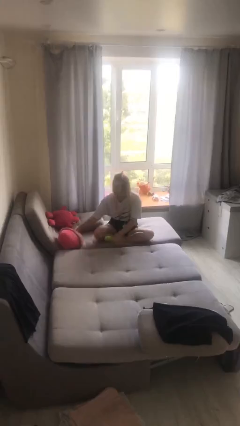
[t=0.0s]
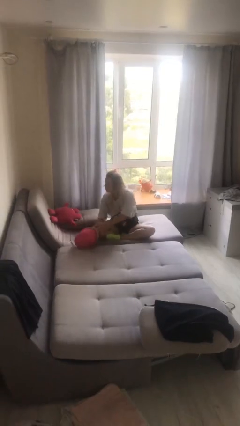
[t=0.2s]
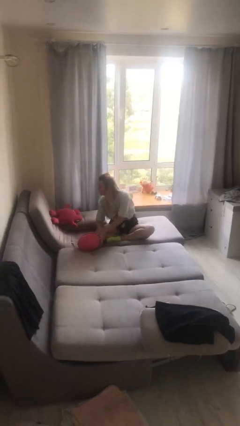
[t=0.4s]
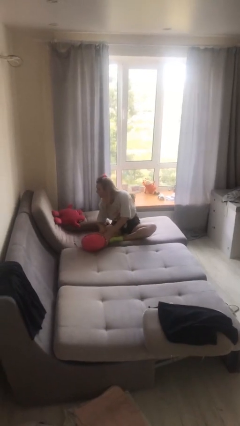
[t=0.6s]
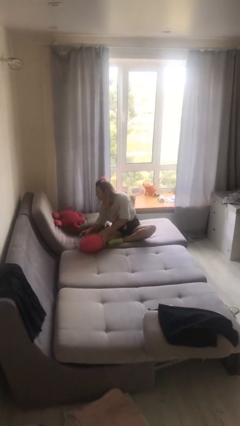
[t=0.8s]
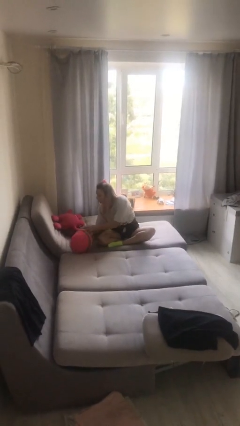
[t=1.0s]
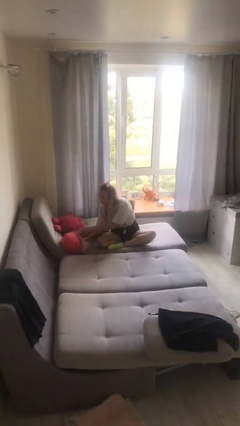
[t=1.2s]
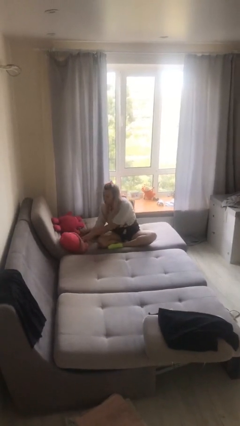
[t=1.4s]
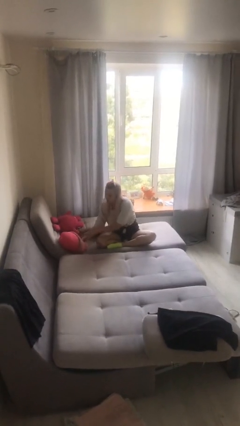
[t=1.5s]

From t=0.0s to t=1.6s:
person searches under bed

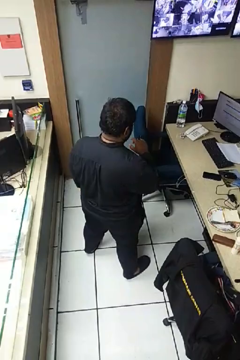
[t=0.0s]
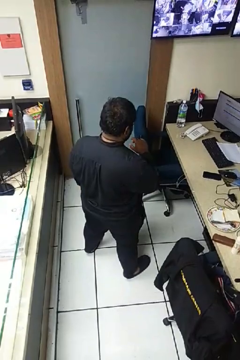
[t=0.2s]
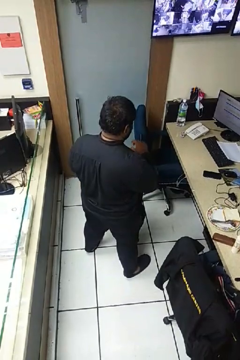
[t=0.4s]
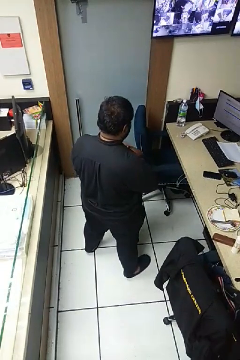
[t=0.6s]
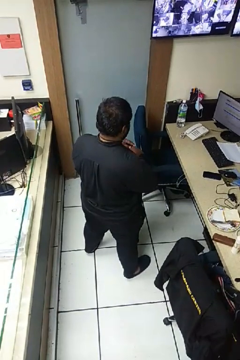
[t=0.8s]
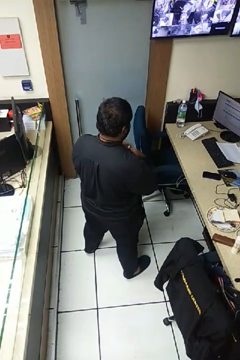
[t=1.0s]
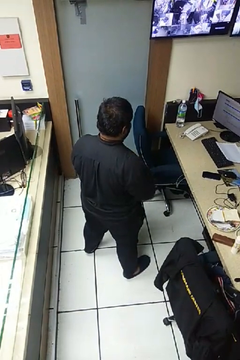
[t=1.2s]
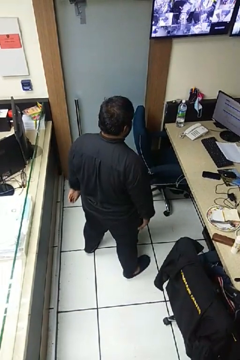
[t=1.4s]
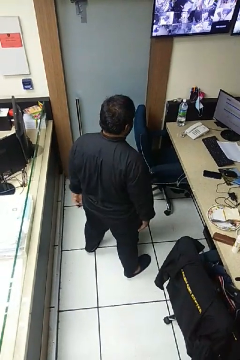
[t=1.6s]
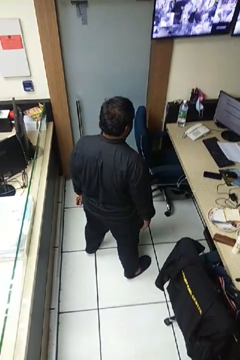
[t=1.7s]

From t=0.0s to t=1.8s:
person takes off ring

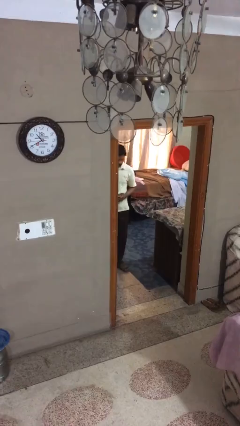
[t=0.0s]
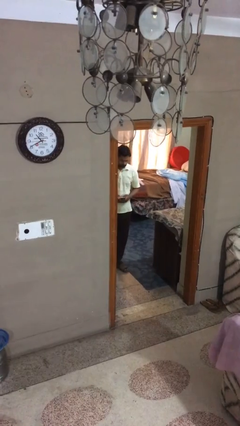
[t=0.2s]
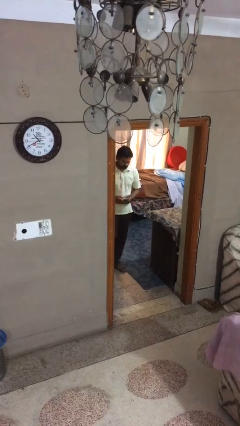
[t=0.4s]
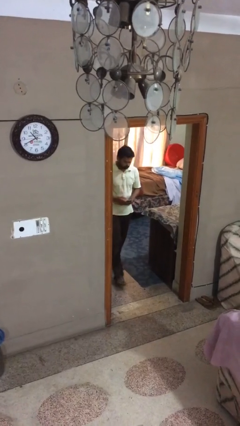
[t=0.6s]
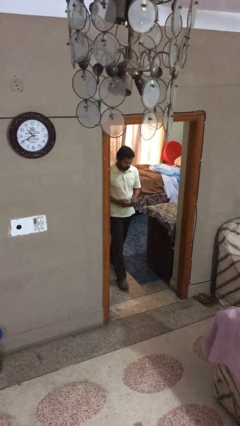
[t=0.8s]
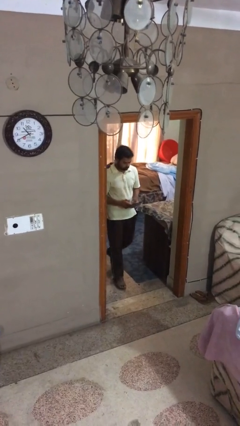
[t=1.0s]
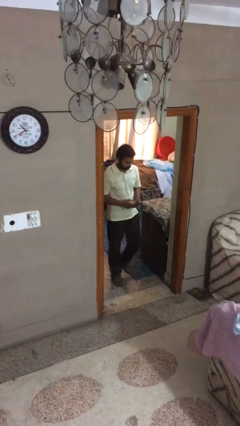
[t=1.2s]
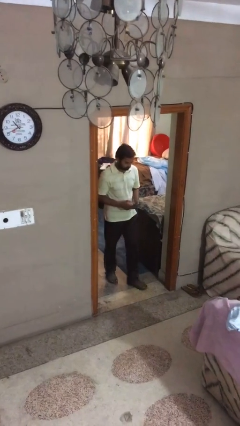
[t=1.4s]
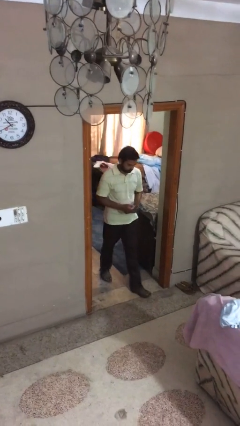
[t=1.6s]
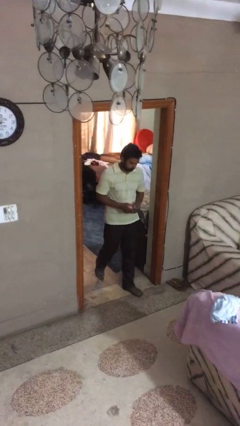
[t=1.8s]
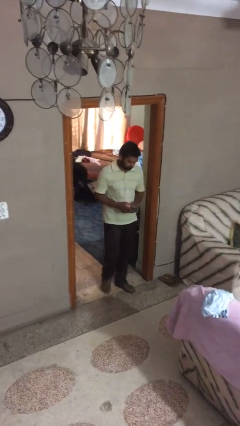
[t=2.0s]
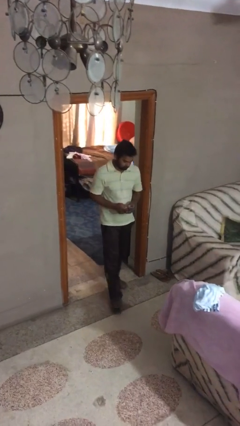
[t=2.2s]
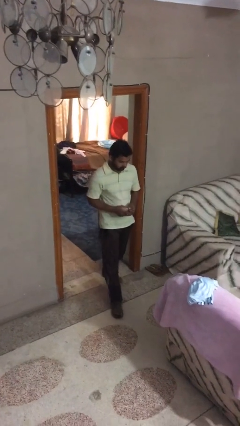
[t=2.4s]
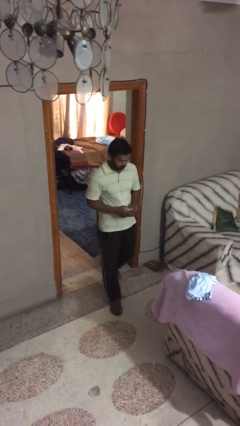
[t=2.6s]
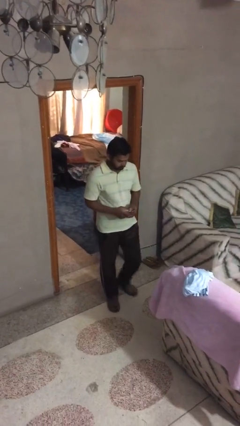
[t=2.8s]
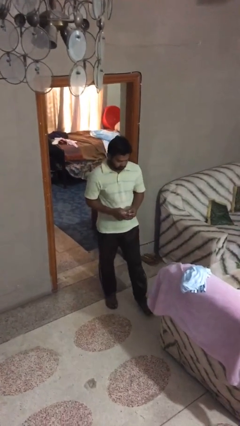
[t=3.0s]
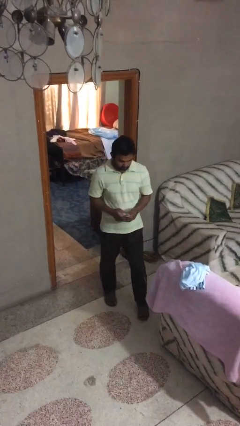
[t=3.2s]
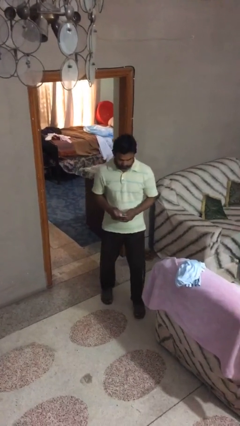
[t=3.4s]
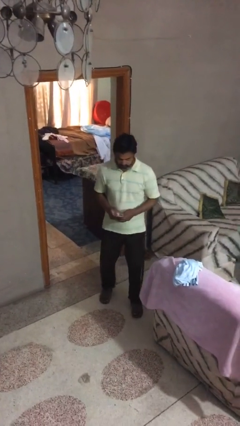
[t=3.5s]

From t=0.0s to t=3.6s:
person enters scene through structure

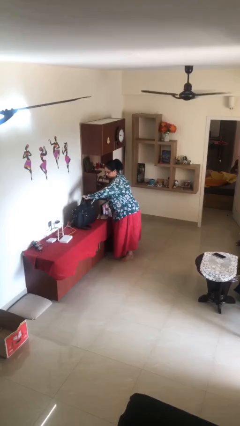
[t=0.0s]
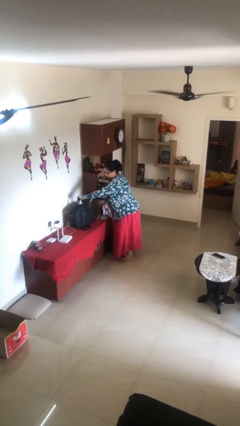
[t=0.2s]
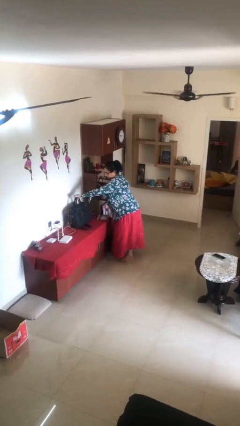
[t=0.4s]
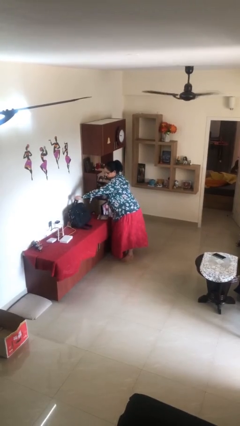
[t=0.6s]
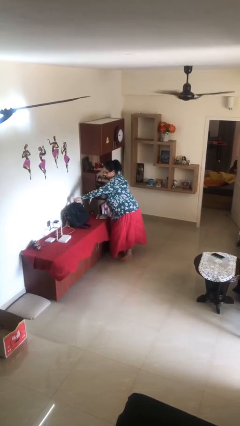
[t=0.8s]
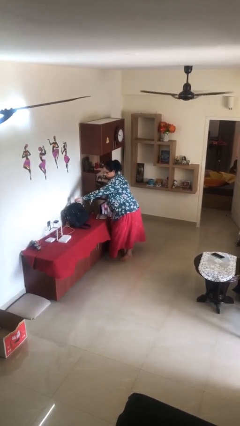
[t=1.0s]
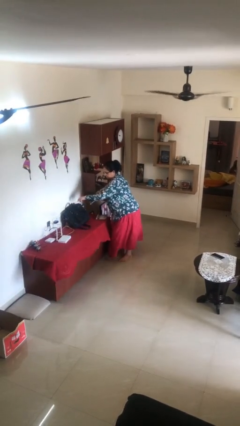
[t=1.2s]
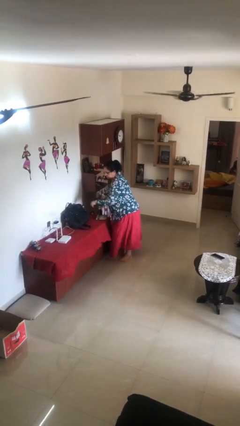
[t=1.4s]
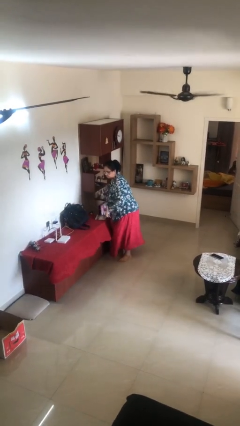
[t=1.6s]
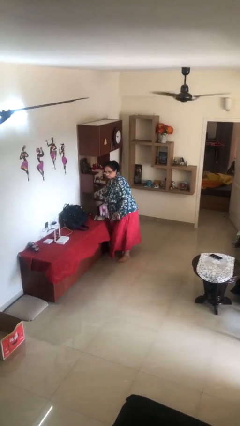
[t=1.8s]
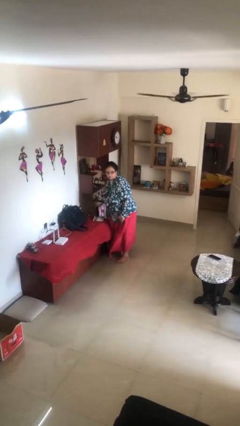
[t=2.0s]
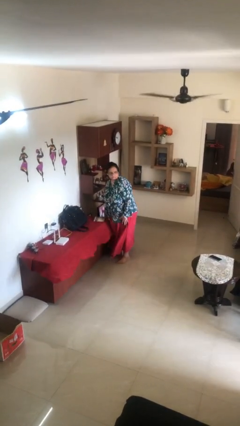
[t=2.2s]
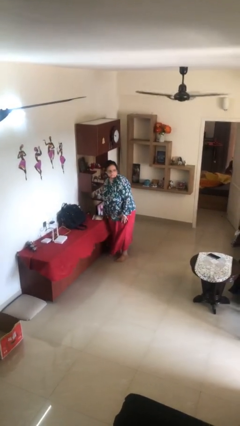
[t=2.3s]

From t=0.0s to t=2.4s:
person puts down object on table

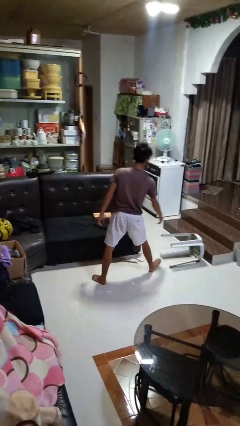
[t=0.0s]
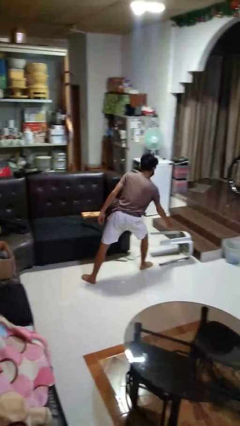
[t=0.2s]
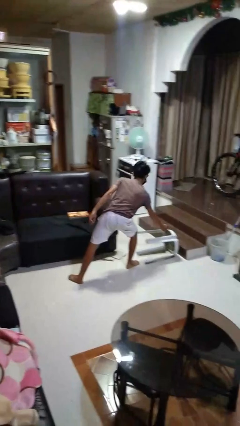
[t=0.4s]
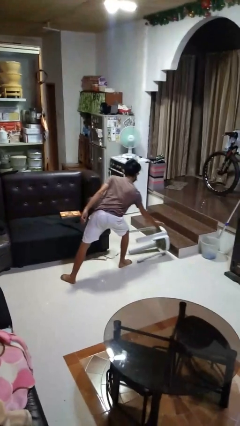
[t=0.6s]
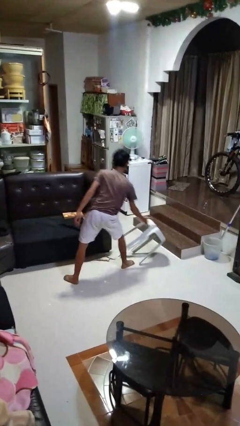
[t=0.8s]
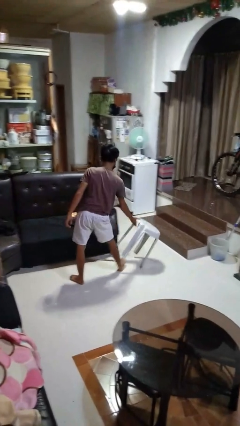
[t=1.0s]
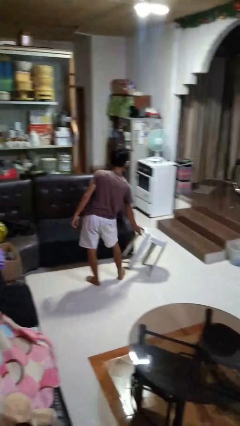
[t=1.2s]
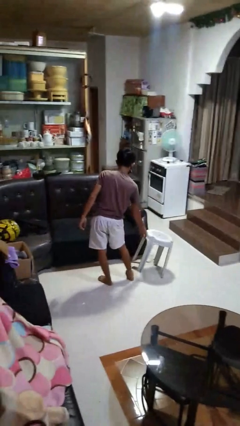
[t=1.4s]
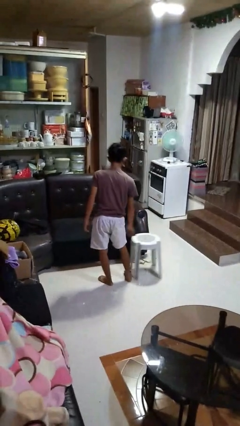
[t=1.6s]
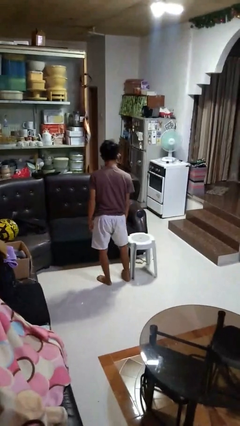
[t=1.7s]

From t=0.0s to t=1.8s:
person sets upright furniture

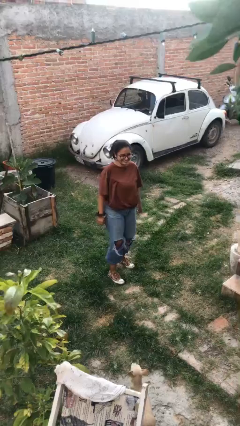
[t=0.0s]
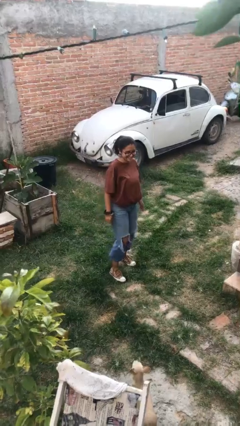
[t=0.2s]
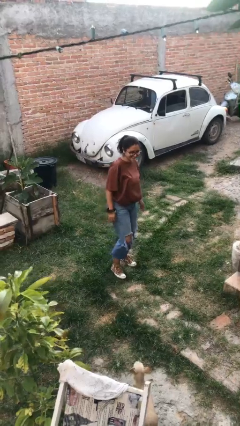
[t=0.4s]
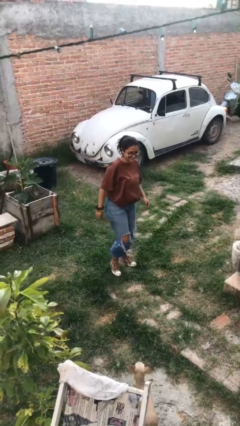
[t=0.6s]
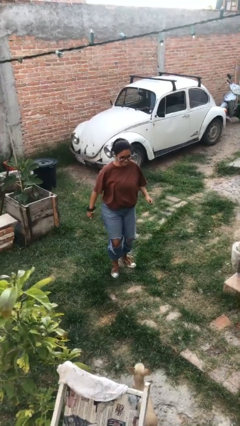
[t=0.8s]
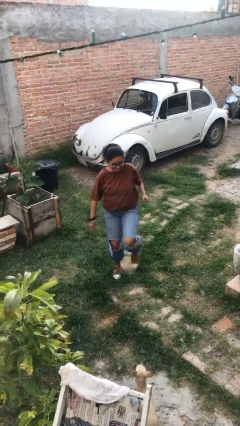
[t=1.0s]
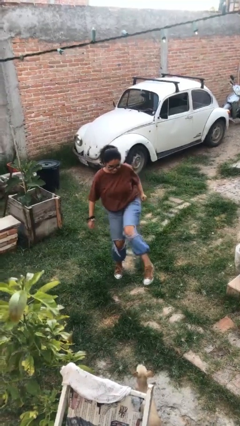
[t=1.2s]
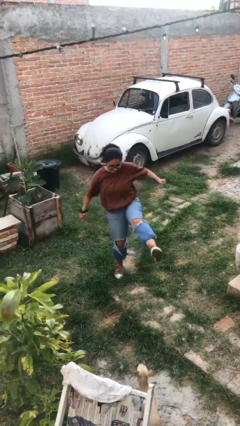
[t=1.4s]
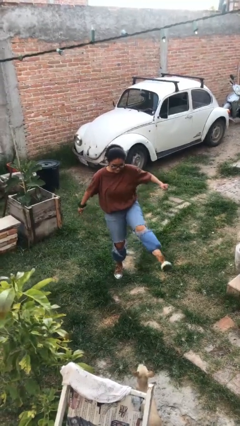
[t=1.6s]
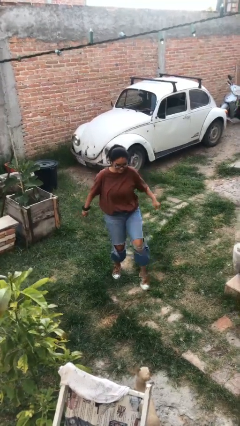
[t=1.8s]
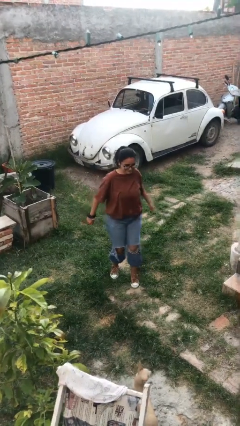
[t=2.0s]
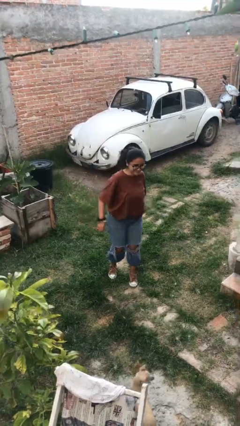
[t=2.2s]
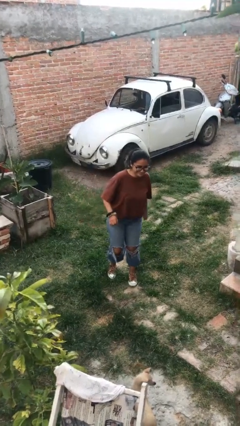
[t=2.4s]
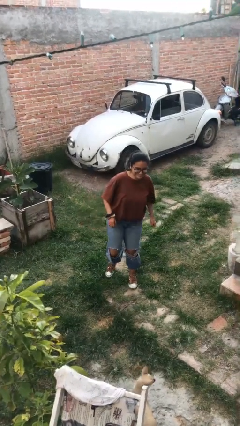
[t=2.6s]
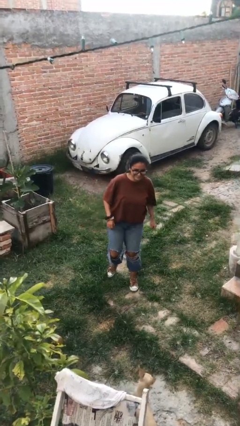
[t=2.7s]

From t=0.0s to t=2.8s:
person karate kicks

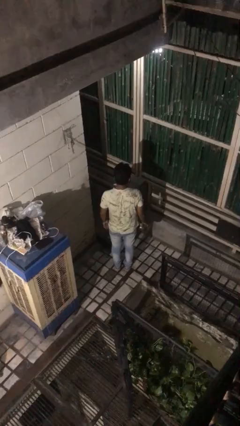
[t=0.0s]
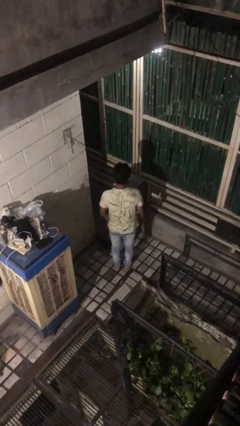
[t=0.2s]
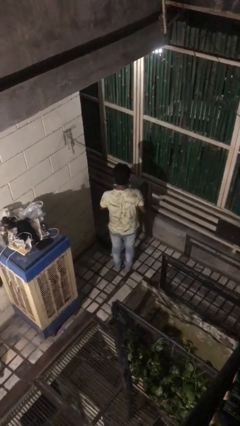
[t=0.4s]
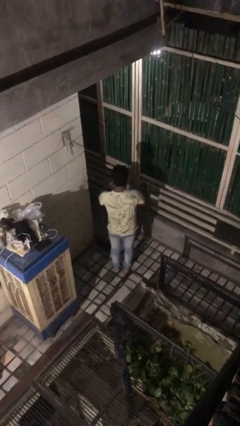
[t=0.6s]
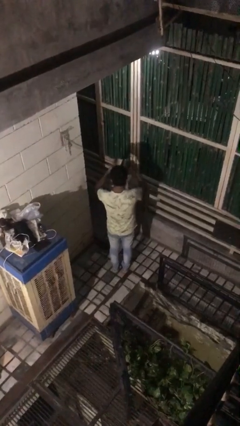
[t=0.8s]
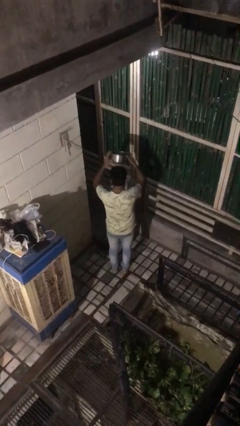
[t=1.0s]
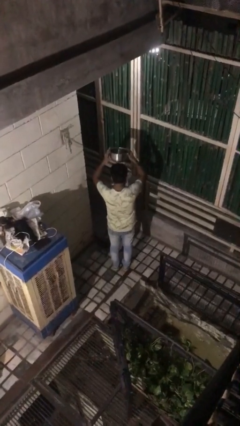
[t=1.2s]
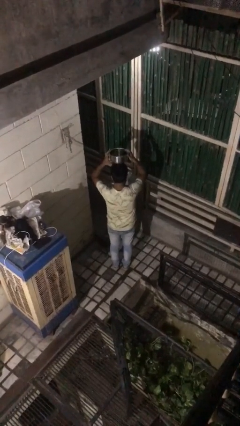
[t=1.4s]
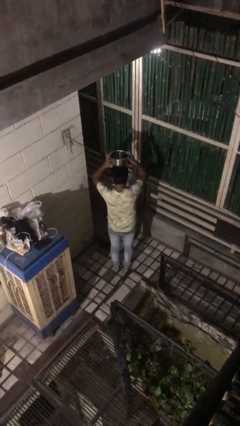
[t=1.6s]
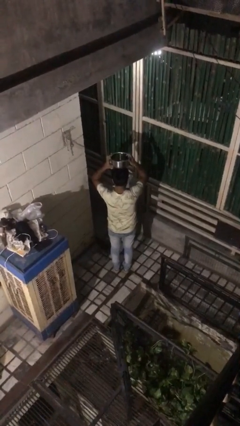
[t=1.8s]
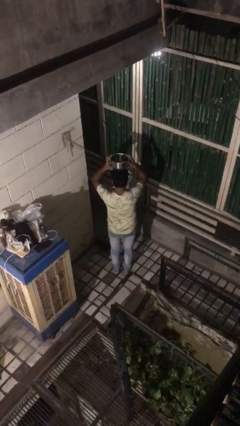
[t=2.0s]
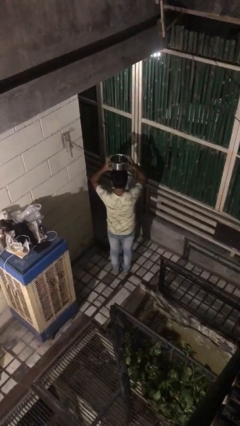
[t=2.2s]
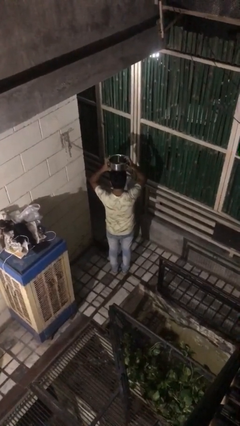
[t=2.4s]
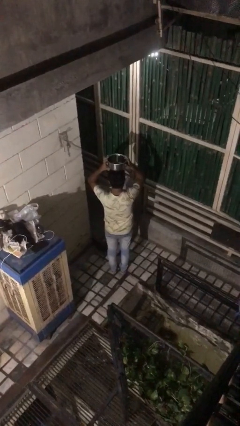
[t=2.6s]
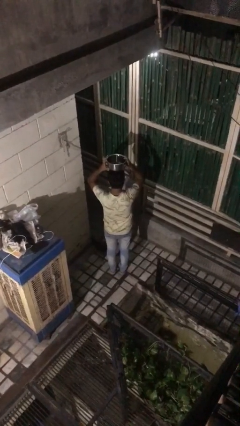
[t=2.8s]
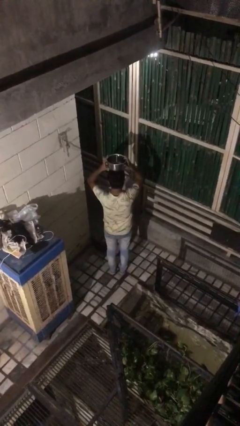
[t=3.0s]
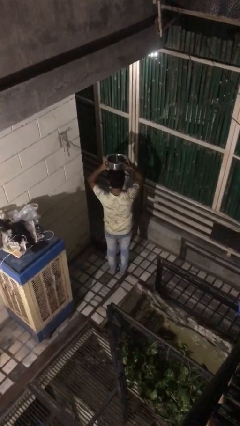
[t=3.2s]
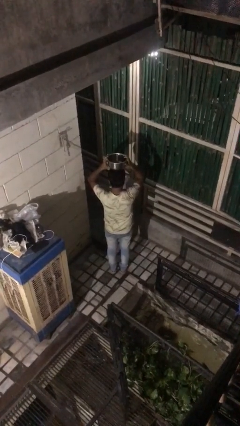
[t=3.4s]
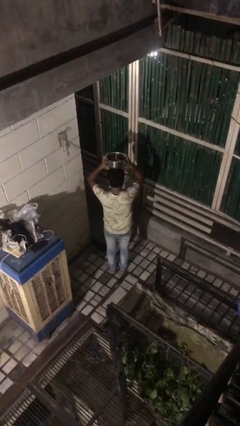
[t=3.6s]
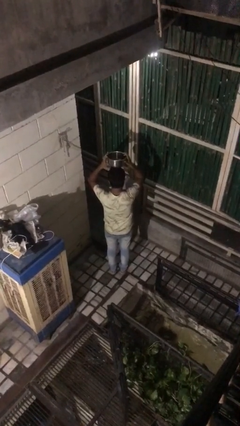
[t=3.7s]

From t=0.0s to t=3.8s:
person holds object above head
